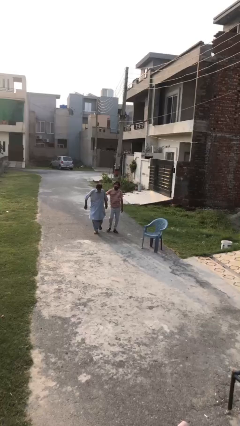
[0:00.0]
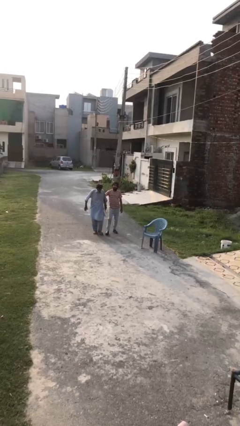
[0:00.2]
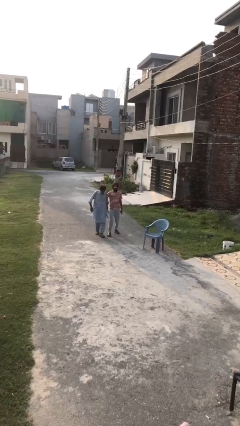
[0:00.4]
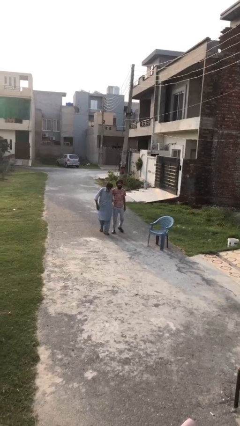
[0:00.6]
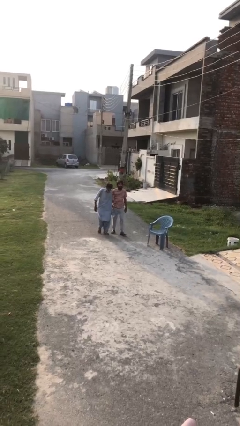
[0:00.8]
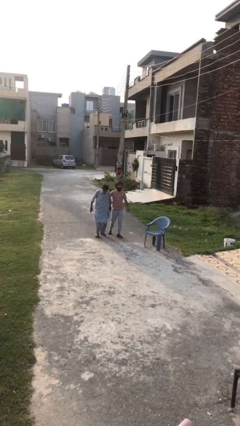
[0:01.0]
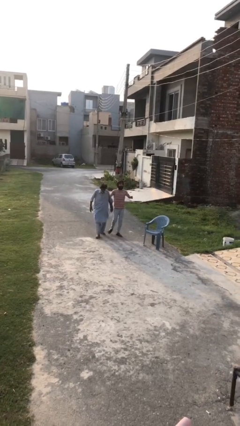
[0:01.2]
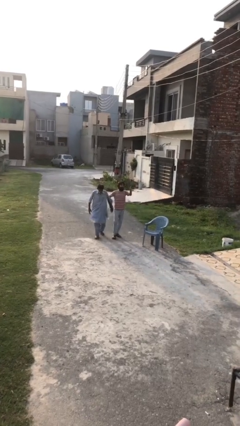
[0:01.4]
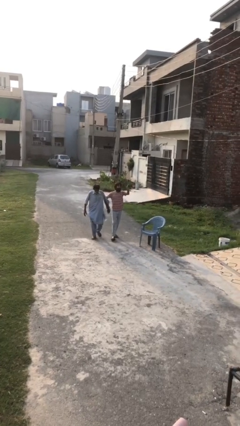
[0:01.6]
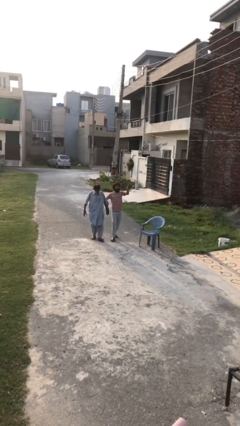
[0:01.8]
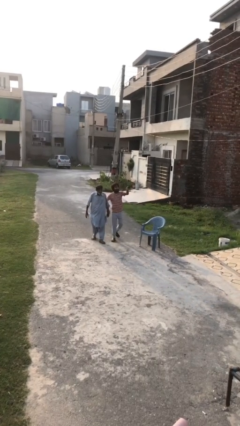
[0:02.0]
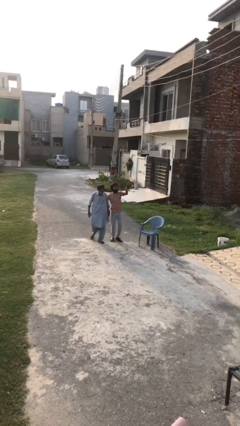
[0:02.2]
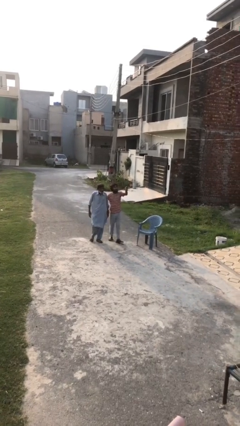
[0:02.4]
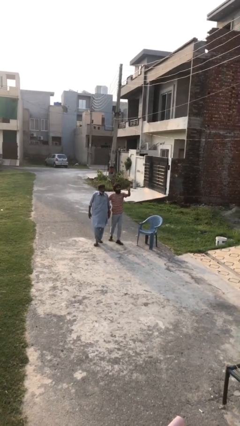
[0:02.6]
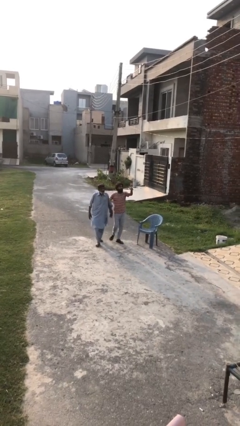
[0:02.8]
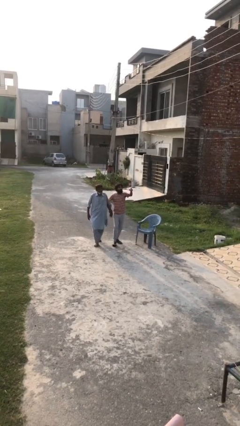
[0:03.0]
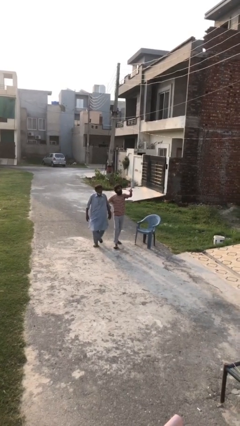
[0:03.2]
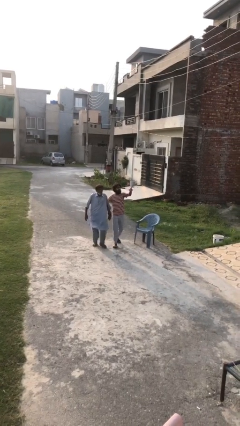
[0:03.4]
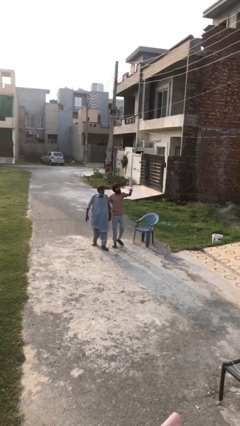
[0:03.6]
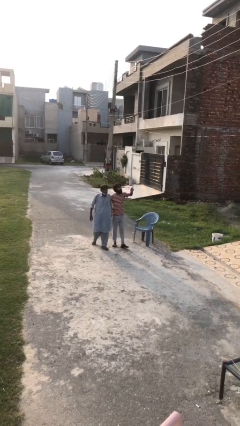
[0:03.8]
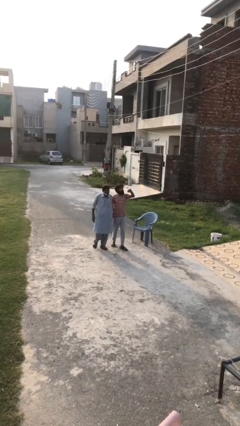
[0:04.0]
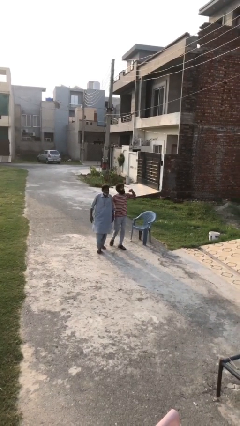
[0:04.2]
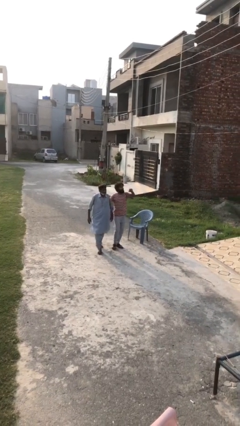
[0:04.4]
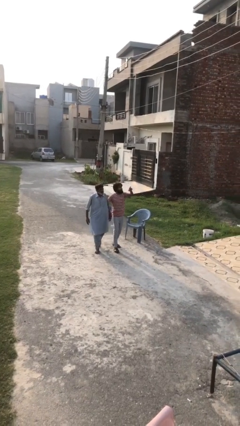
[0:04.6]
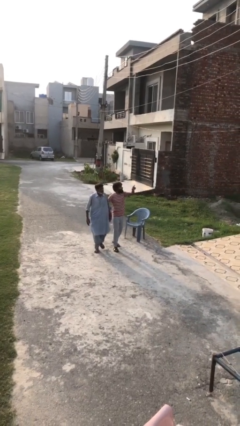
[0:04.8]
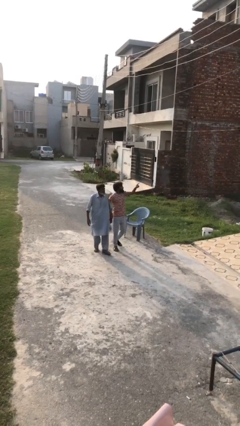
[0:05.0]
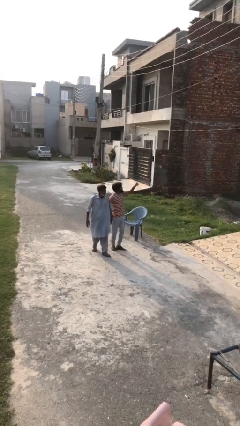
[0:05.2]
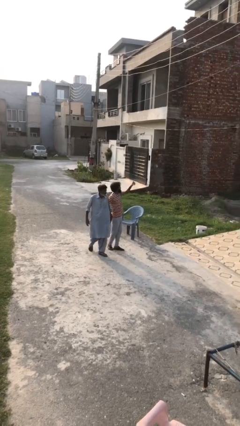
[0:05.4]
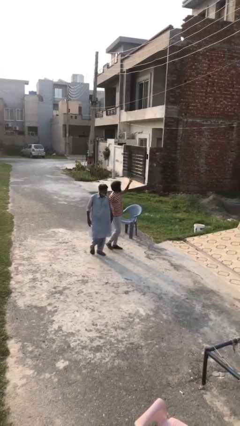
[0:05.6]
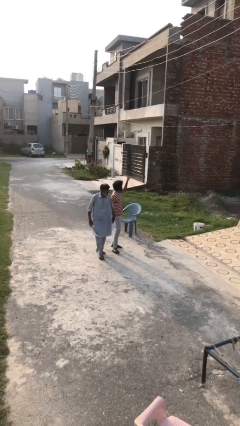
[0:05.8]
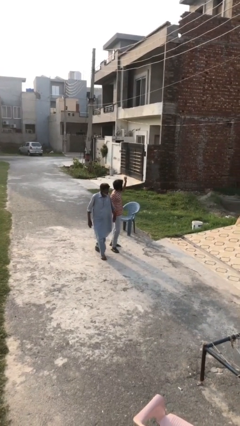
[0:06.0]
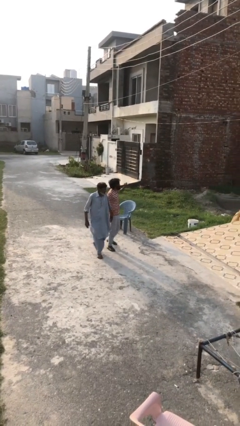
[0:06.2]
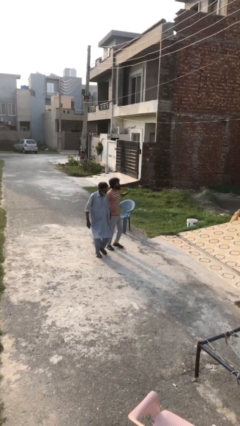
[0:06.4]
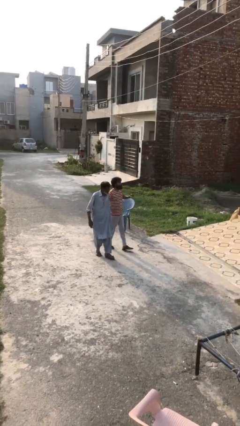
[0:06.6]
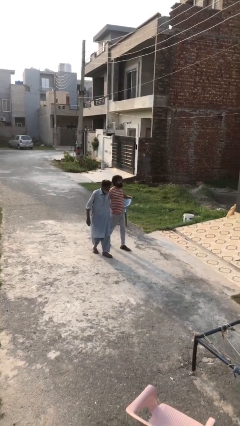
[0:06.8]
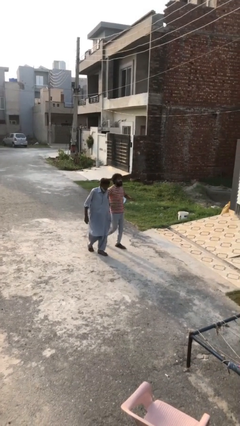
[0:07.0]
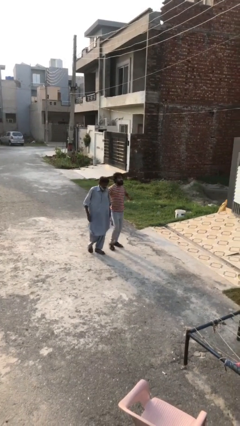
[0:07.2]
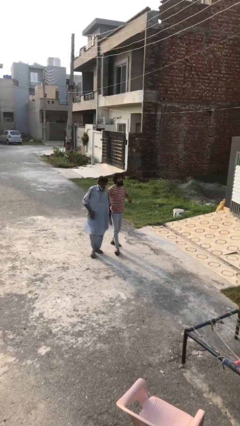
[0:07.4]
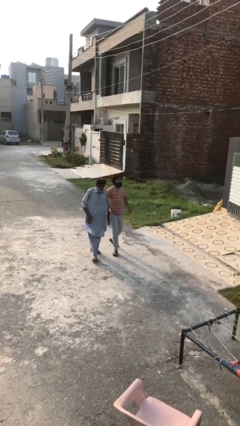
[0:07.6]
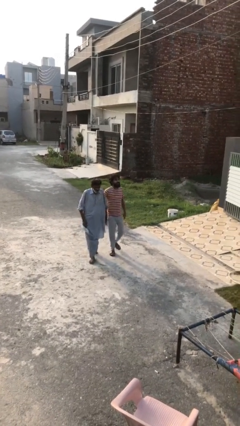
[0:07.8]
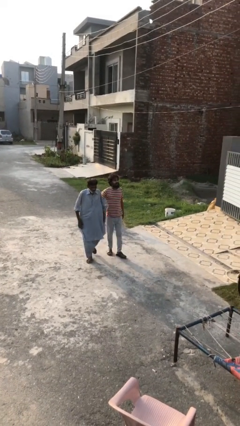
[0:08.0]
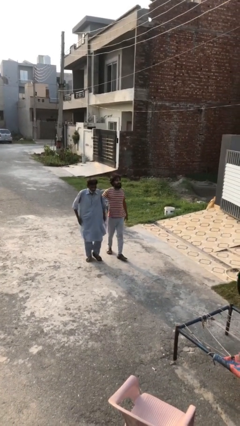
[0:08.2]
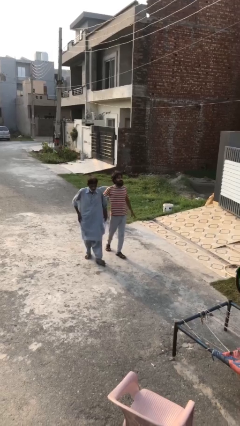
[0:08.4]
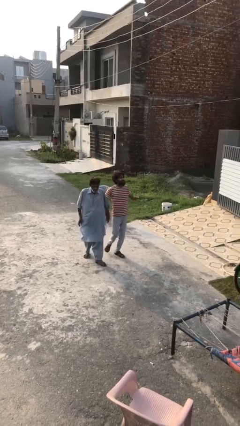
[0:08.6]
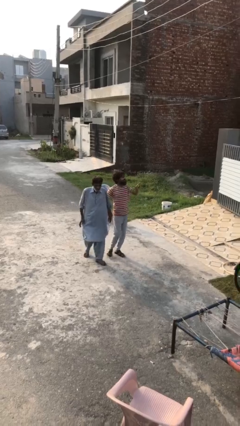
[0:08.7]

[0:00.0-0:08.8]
person holds hand

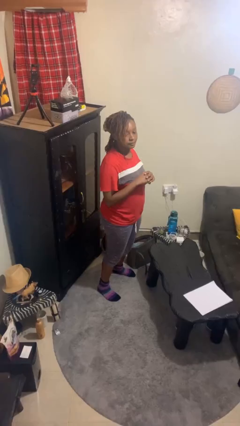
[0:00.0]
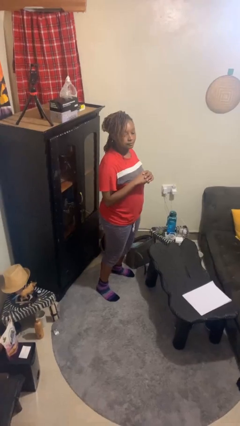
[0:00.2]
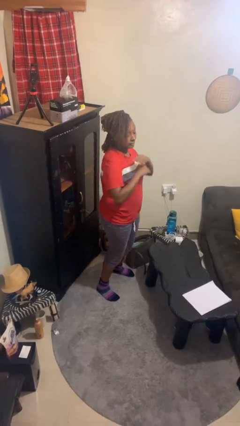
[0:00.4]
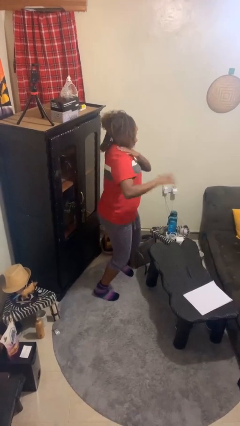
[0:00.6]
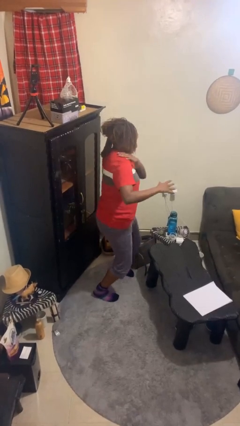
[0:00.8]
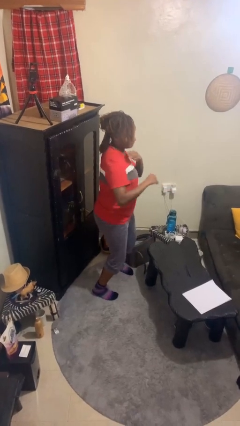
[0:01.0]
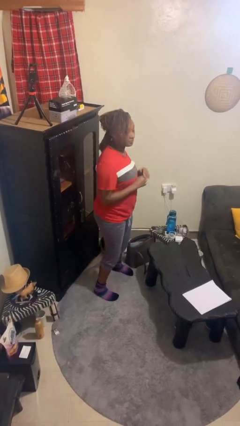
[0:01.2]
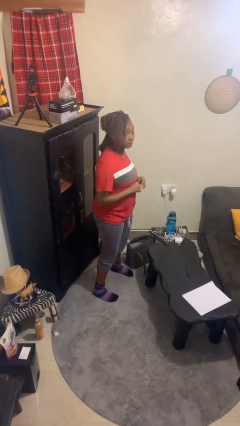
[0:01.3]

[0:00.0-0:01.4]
person karate chop

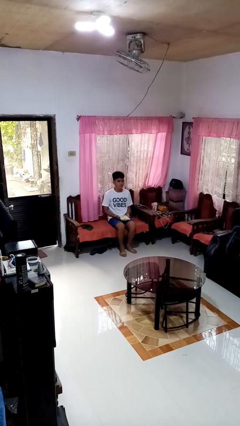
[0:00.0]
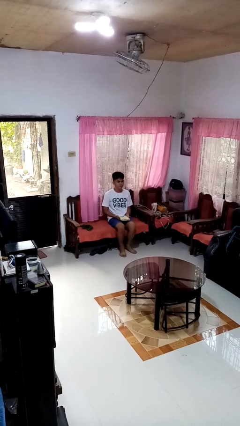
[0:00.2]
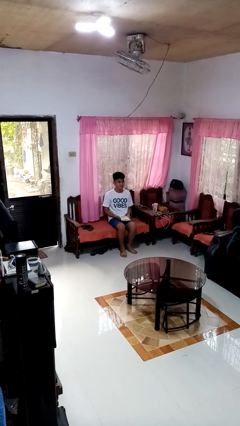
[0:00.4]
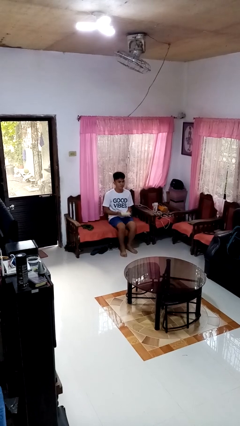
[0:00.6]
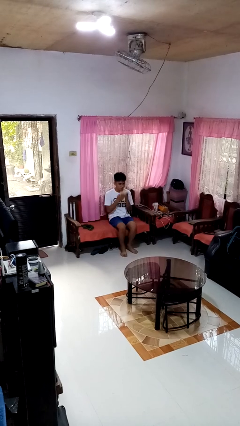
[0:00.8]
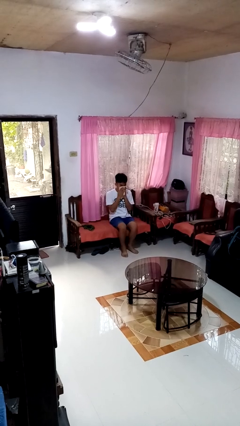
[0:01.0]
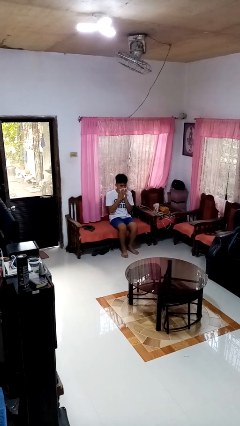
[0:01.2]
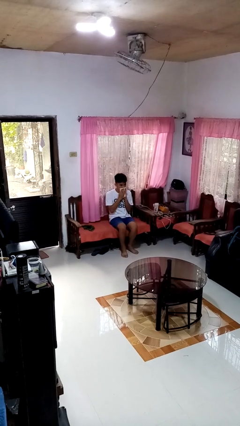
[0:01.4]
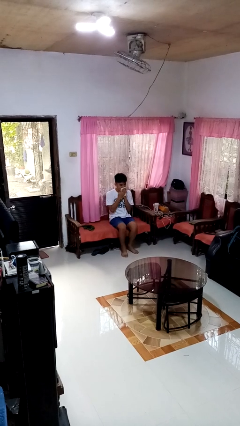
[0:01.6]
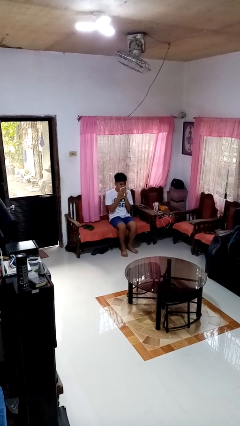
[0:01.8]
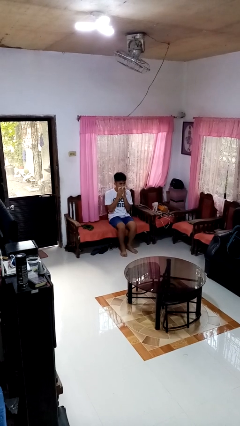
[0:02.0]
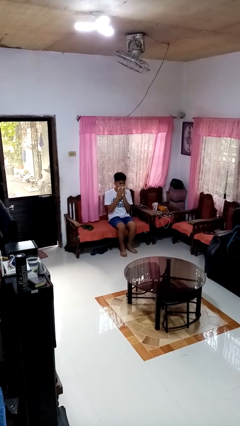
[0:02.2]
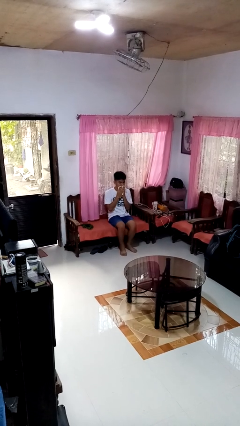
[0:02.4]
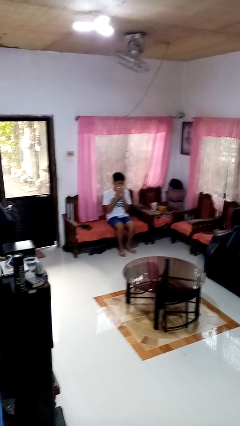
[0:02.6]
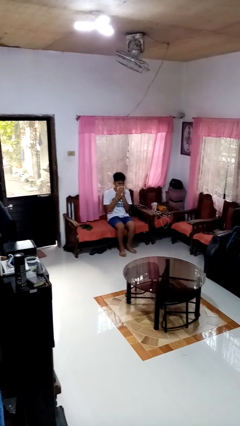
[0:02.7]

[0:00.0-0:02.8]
person wipes mouth with napkin

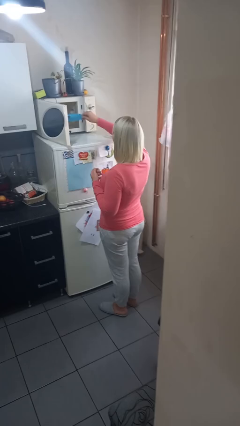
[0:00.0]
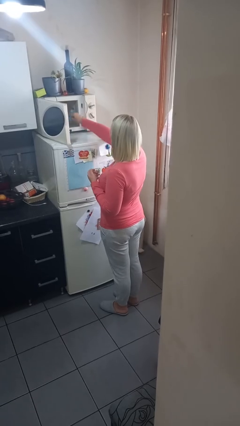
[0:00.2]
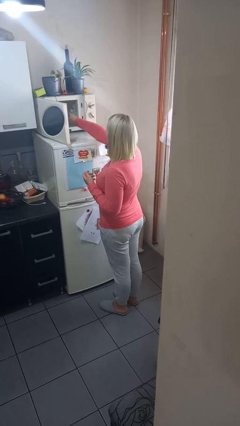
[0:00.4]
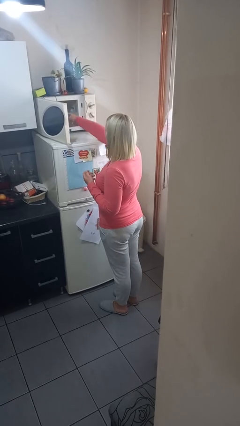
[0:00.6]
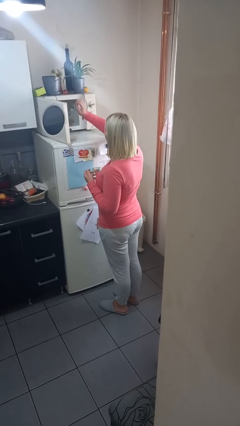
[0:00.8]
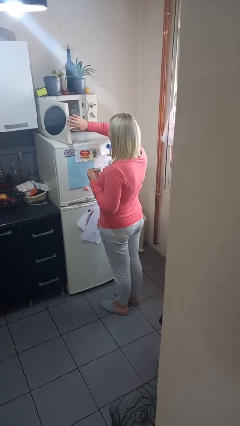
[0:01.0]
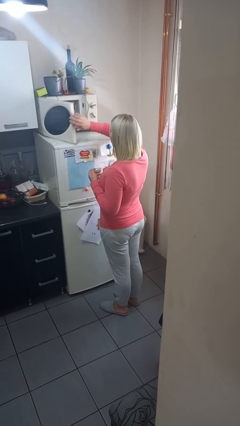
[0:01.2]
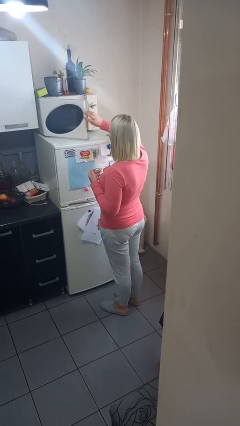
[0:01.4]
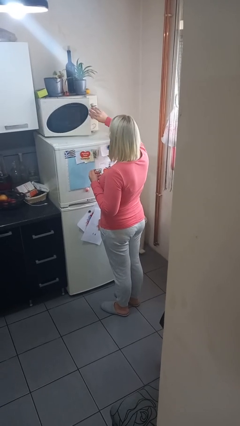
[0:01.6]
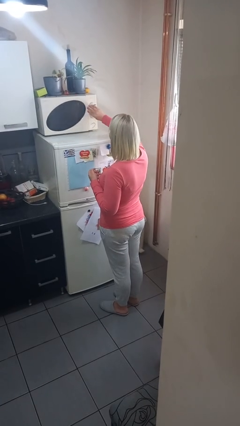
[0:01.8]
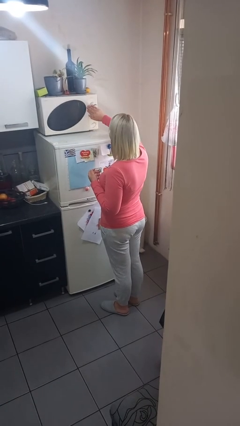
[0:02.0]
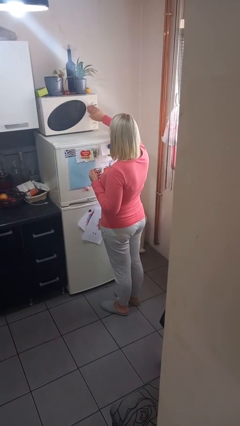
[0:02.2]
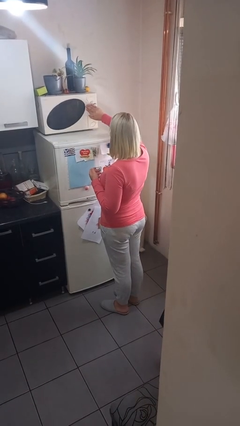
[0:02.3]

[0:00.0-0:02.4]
person puts object into microwave

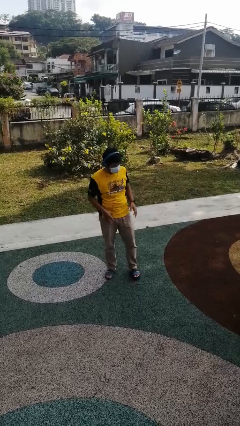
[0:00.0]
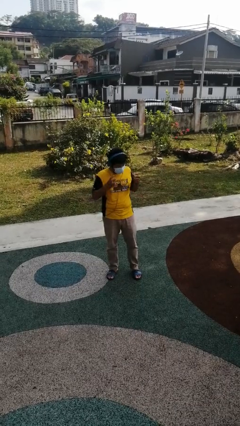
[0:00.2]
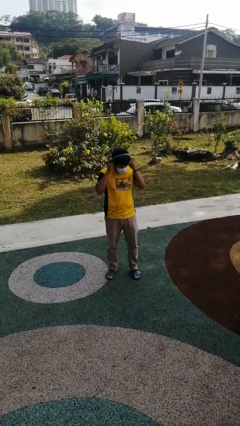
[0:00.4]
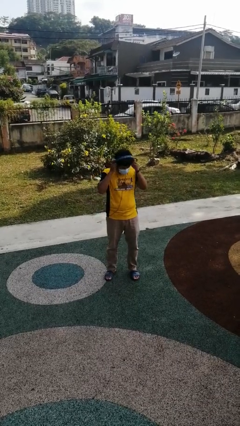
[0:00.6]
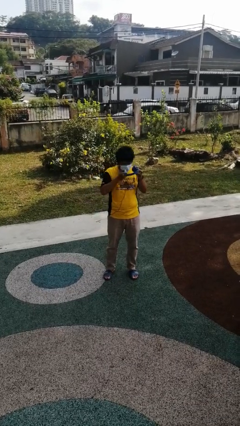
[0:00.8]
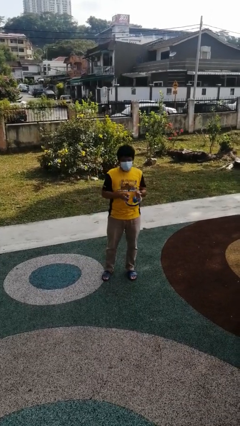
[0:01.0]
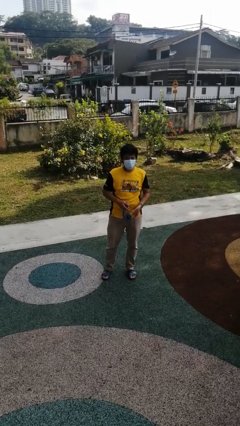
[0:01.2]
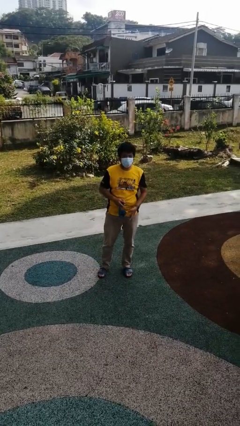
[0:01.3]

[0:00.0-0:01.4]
person takes off headphones

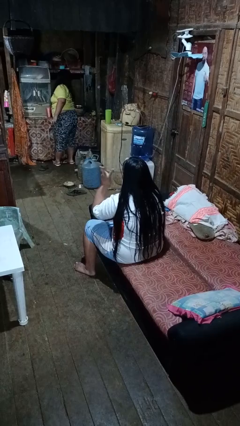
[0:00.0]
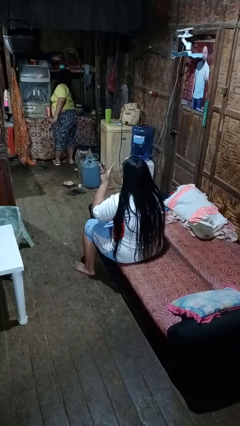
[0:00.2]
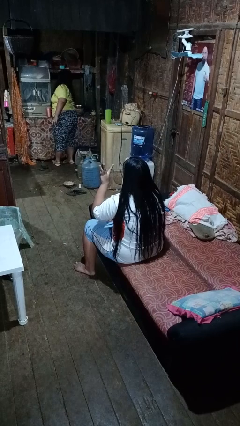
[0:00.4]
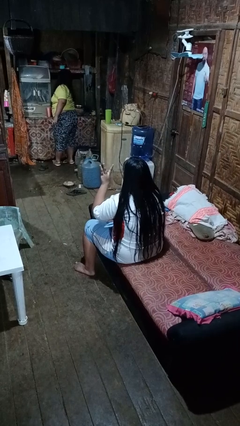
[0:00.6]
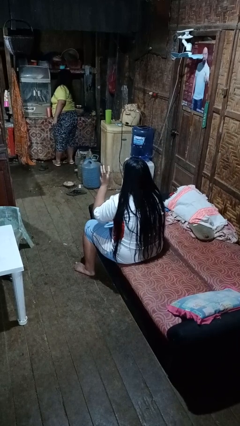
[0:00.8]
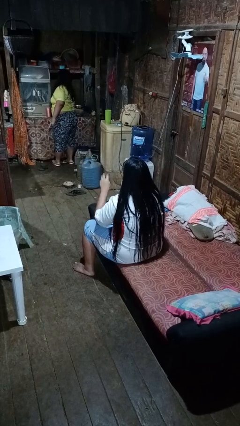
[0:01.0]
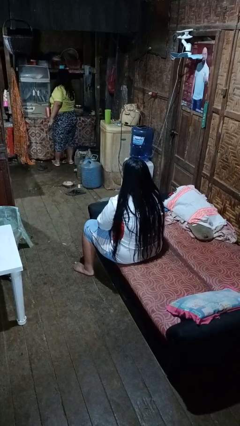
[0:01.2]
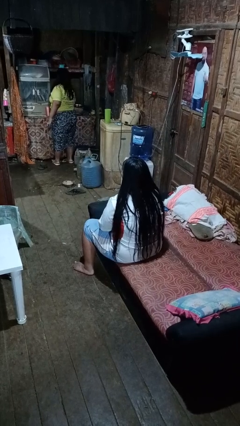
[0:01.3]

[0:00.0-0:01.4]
person gestures number three
